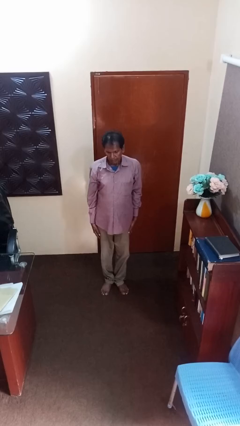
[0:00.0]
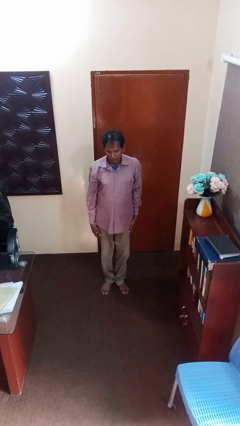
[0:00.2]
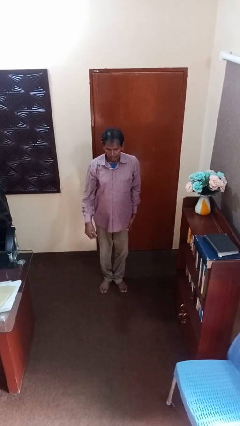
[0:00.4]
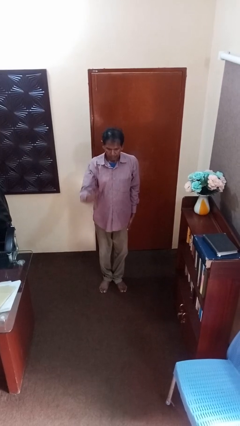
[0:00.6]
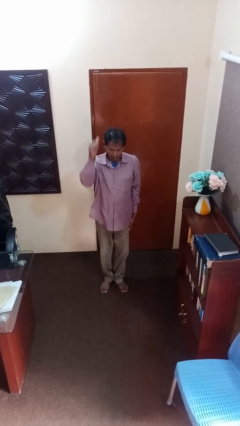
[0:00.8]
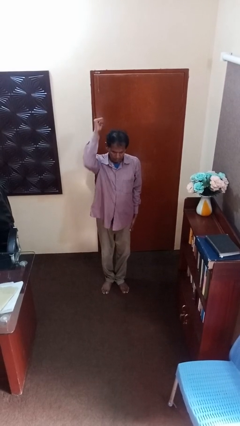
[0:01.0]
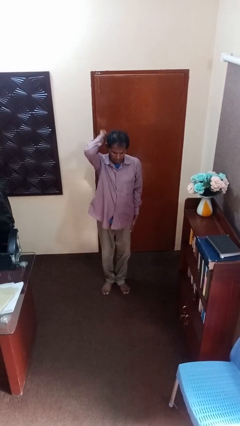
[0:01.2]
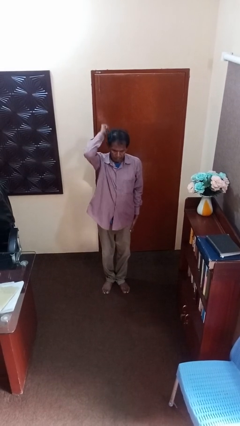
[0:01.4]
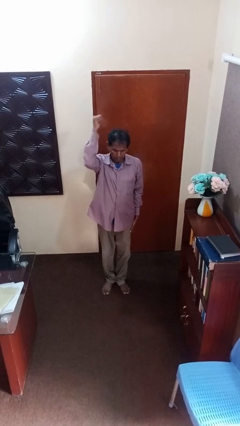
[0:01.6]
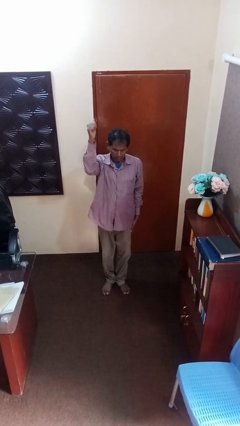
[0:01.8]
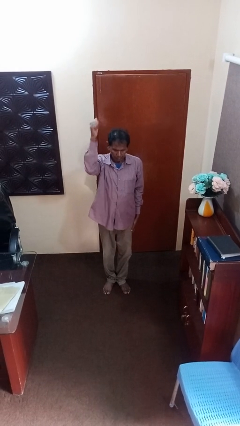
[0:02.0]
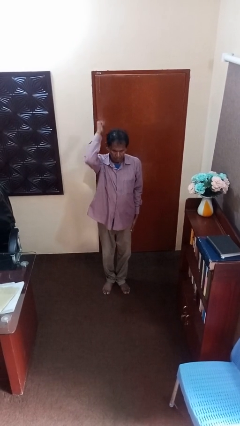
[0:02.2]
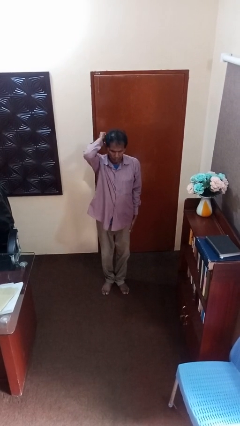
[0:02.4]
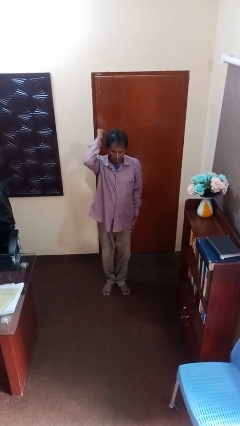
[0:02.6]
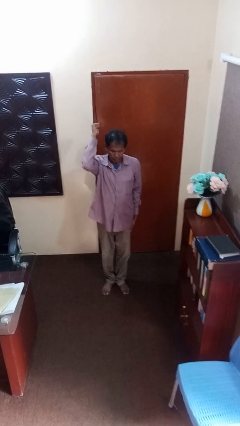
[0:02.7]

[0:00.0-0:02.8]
person gestures behind me

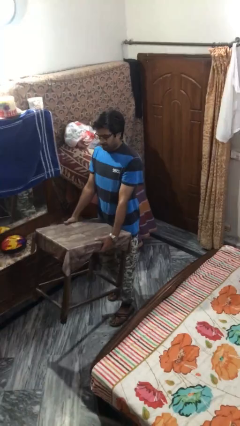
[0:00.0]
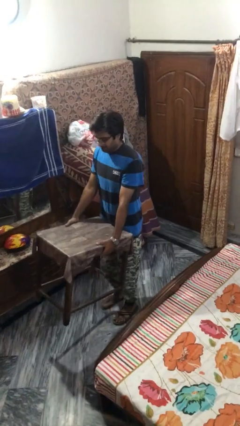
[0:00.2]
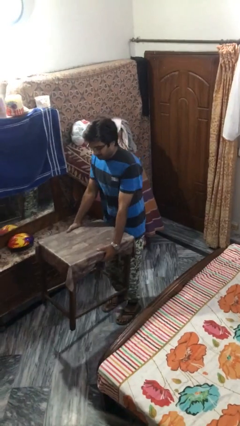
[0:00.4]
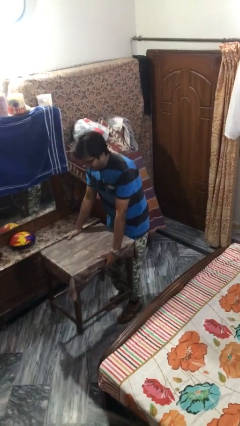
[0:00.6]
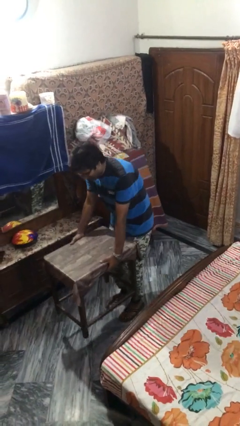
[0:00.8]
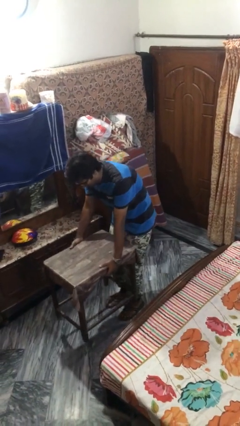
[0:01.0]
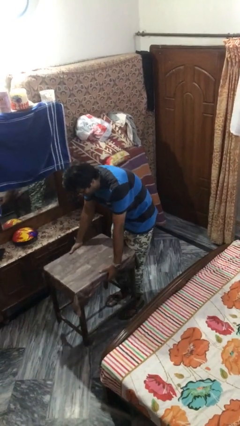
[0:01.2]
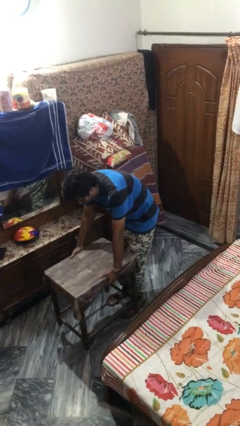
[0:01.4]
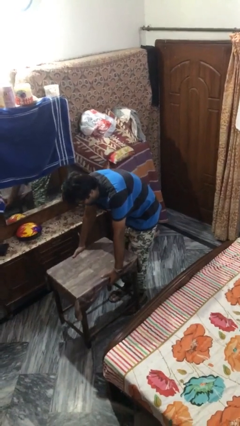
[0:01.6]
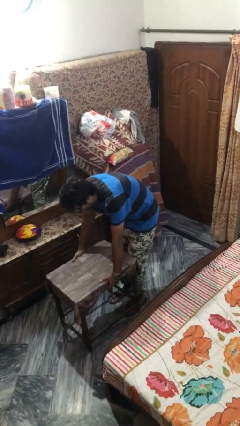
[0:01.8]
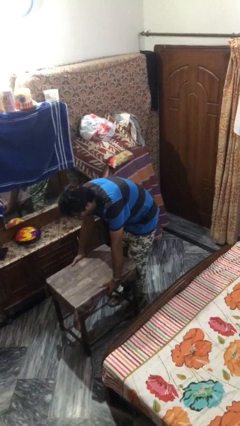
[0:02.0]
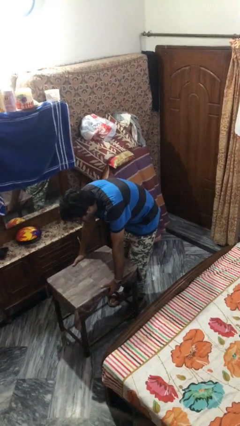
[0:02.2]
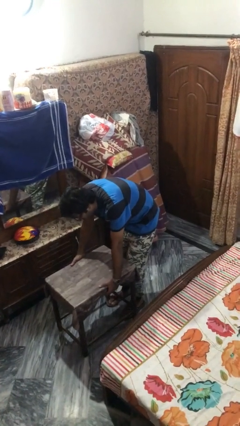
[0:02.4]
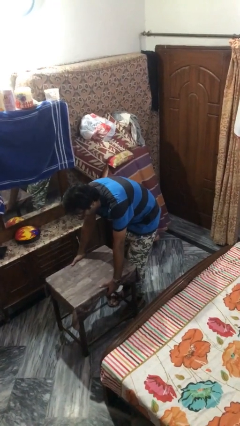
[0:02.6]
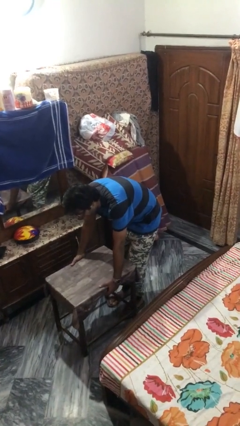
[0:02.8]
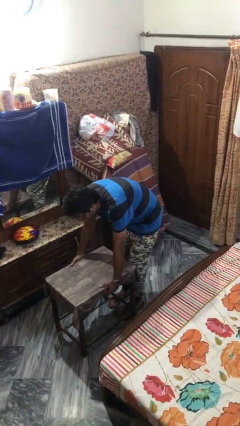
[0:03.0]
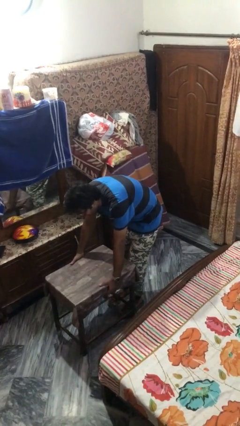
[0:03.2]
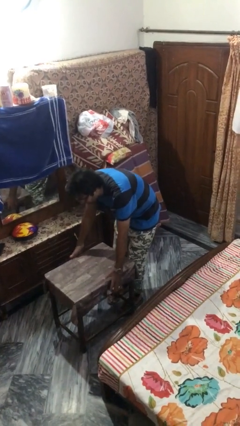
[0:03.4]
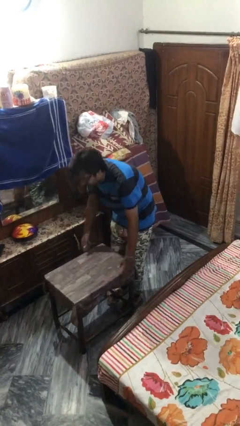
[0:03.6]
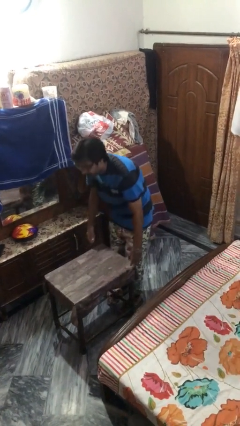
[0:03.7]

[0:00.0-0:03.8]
person puts down object on floor

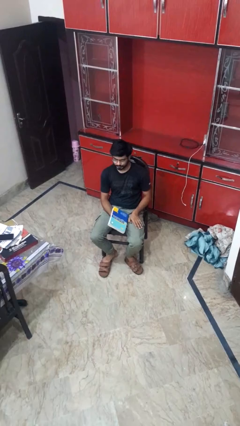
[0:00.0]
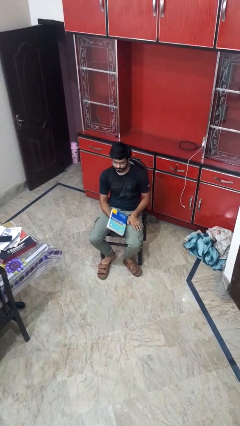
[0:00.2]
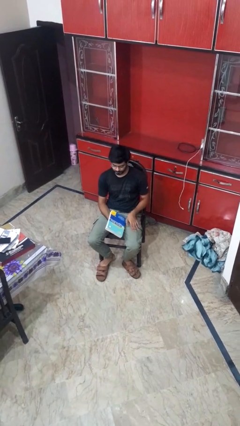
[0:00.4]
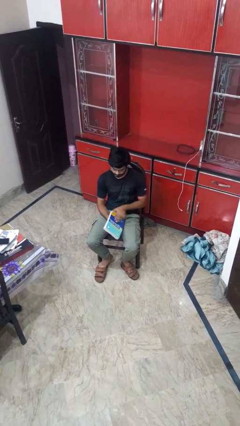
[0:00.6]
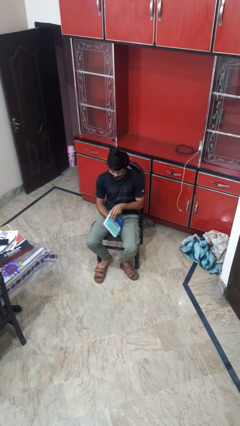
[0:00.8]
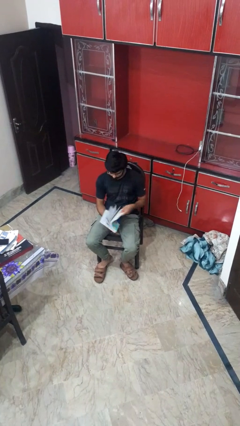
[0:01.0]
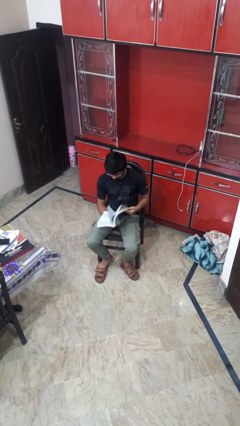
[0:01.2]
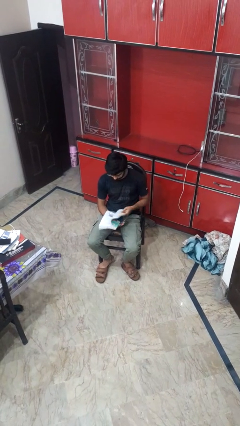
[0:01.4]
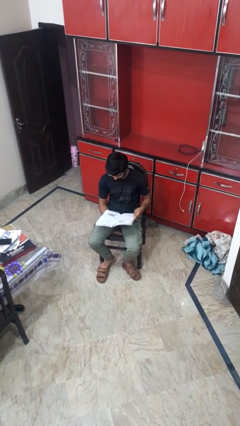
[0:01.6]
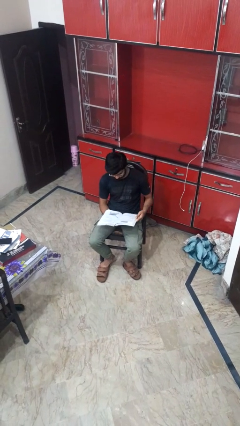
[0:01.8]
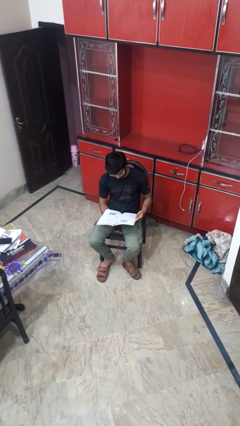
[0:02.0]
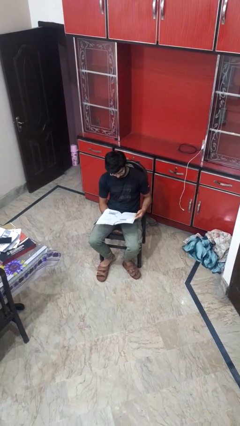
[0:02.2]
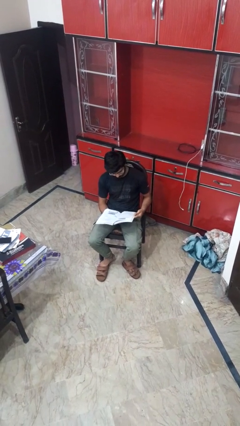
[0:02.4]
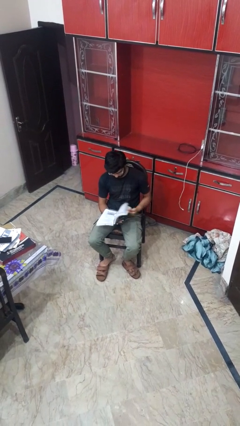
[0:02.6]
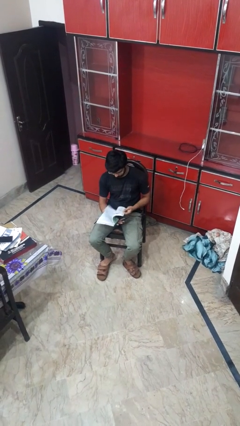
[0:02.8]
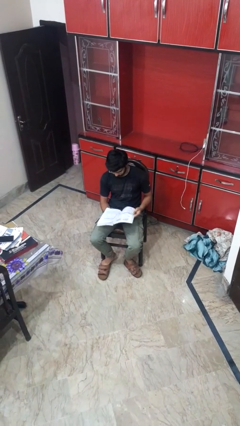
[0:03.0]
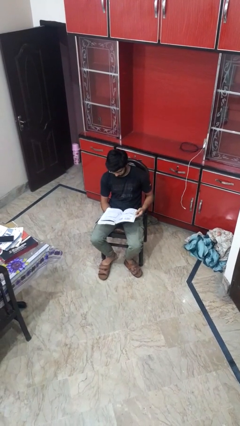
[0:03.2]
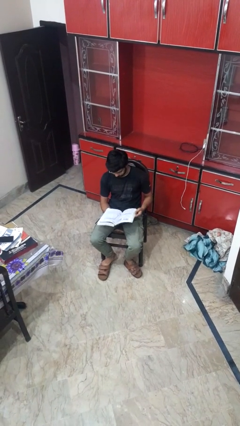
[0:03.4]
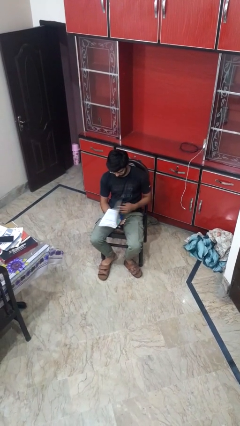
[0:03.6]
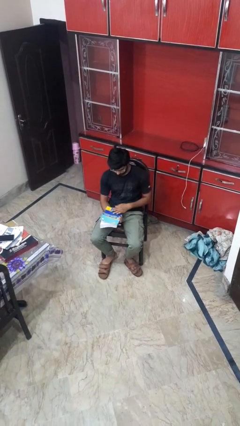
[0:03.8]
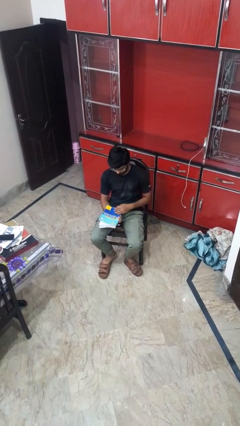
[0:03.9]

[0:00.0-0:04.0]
person reads book

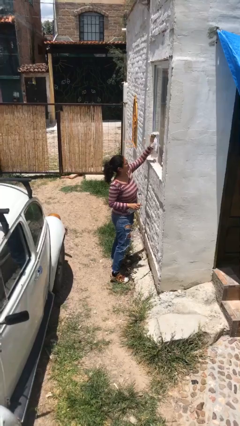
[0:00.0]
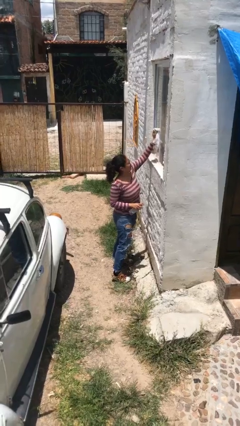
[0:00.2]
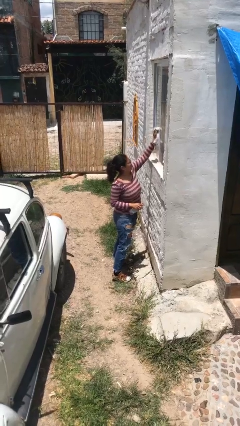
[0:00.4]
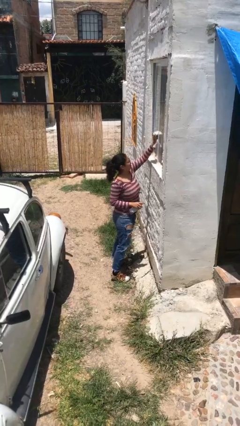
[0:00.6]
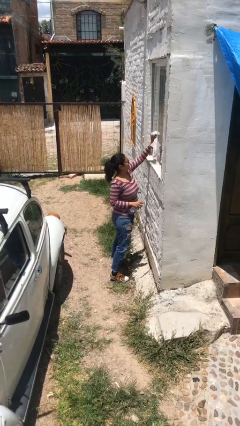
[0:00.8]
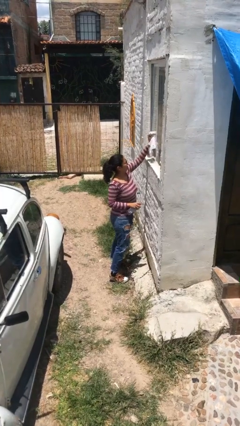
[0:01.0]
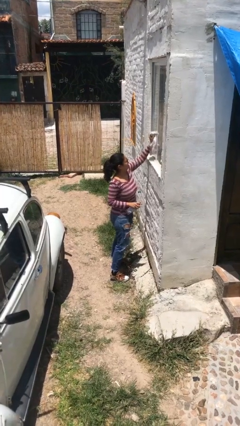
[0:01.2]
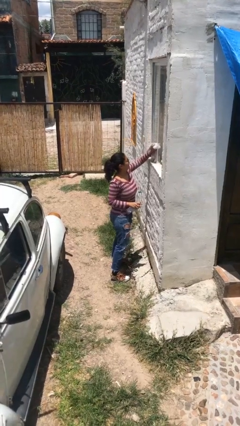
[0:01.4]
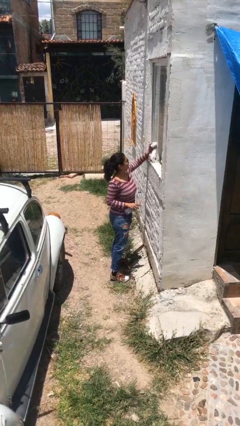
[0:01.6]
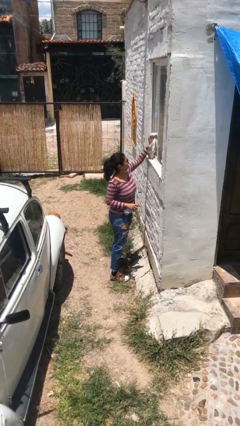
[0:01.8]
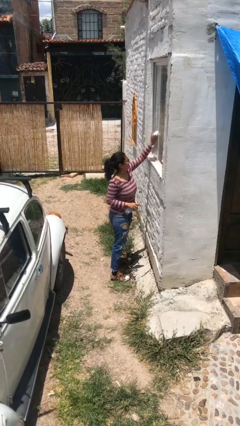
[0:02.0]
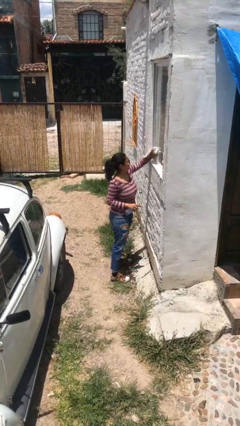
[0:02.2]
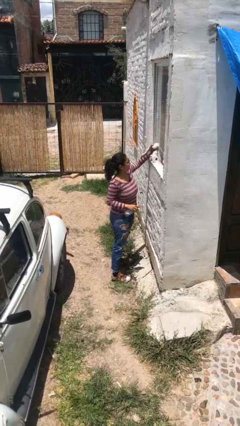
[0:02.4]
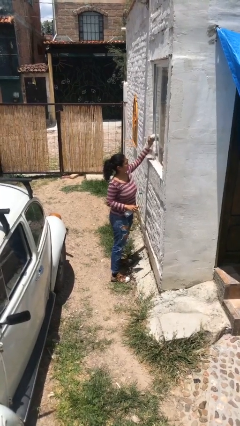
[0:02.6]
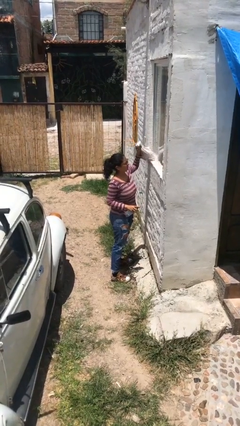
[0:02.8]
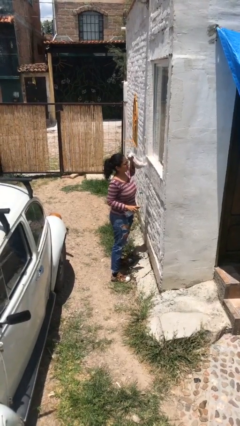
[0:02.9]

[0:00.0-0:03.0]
person washes window

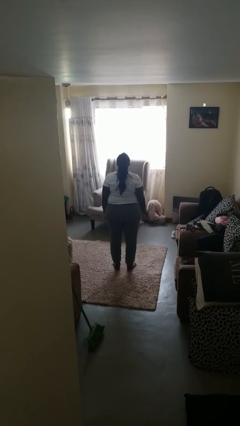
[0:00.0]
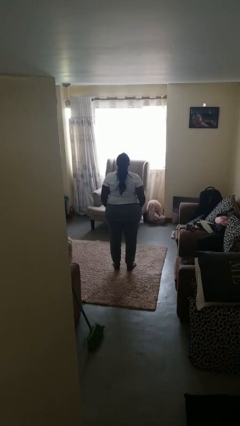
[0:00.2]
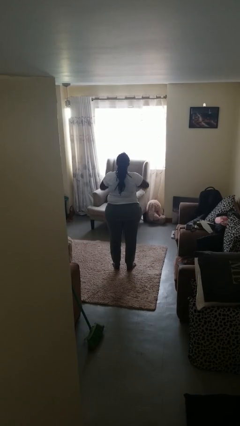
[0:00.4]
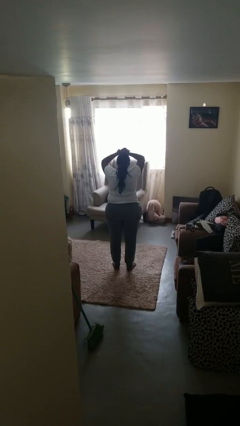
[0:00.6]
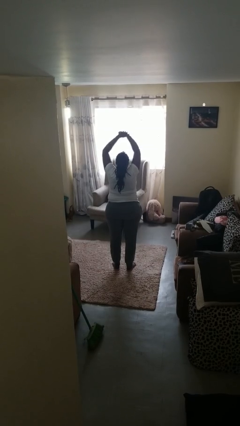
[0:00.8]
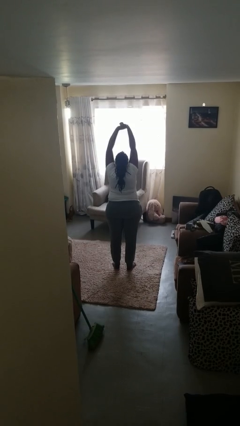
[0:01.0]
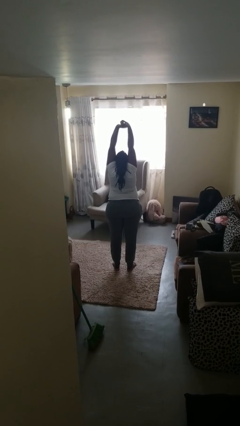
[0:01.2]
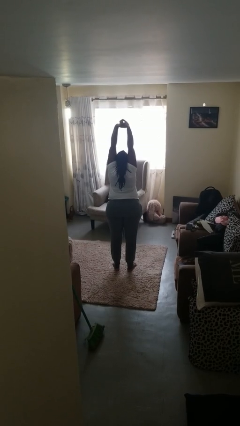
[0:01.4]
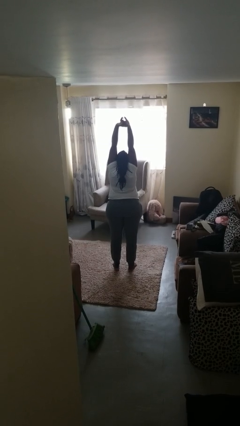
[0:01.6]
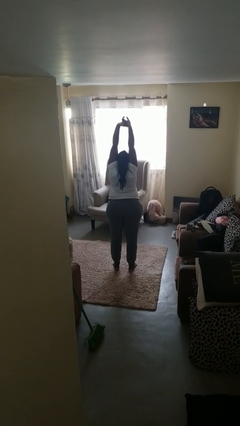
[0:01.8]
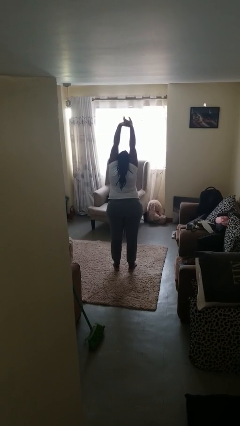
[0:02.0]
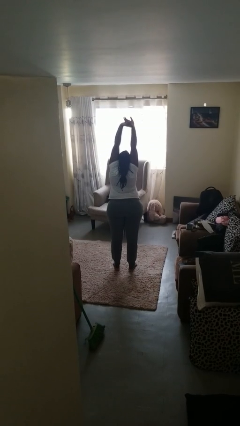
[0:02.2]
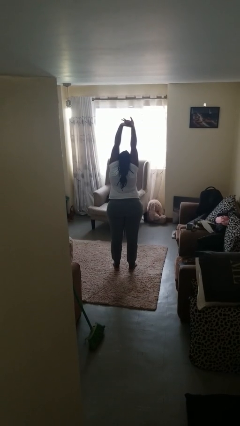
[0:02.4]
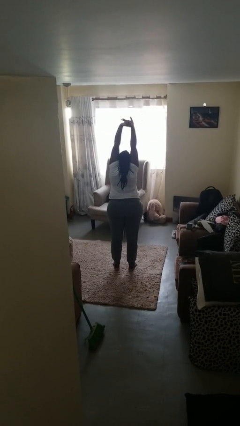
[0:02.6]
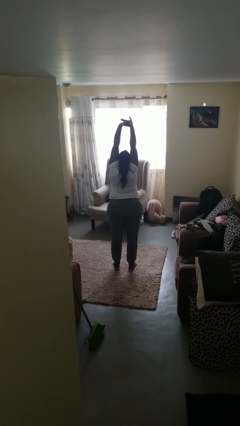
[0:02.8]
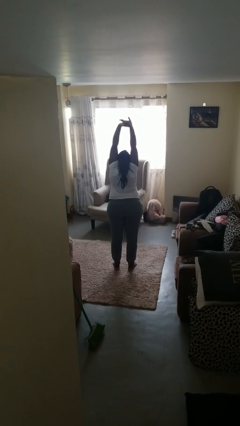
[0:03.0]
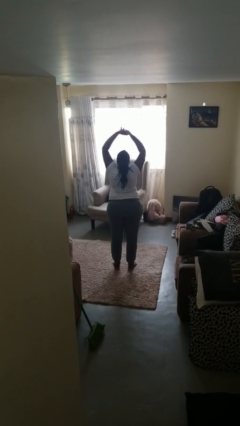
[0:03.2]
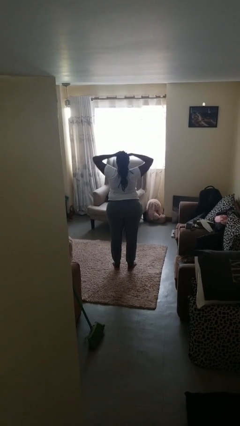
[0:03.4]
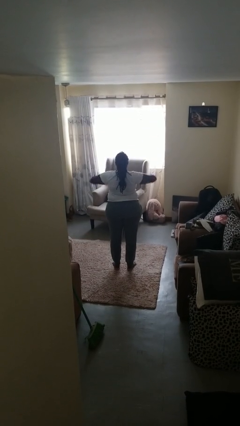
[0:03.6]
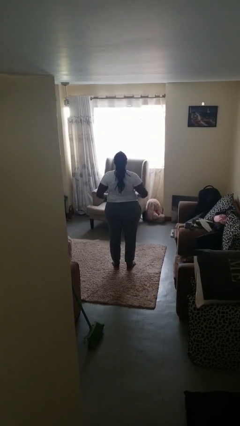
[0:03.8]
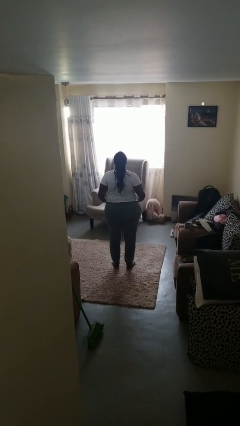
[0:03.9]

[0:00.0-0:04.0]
person stretches arms over head
